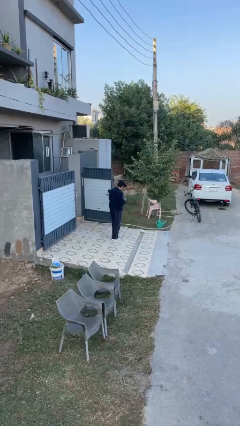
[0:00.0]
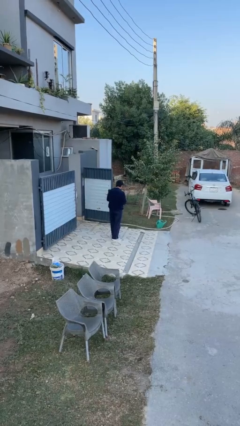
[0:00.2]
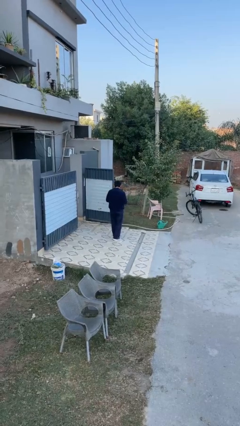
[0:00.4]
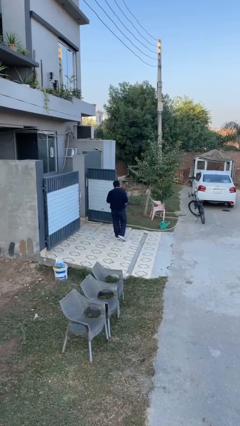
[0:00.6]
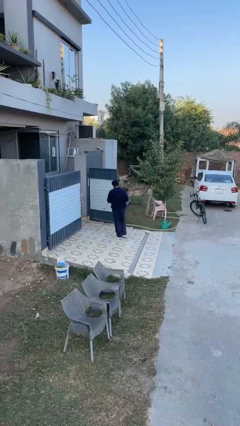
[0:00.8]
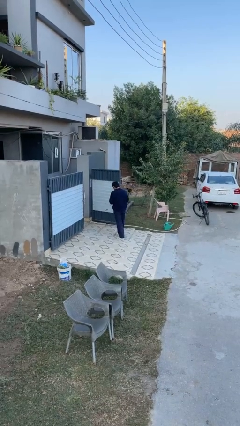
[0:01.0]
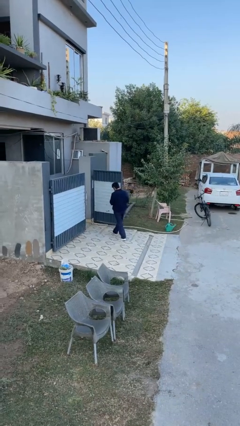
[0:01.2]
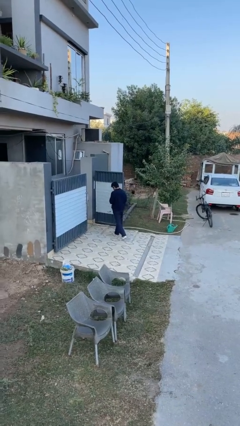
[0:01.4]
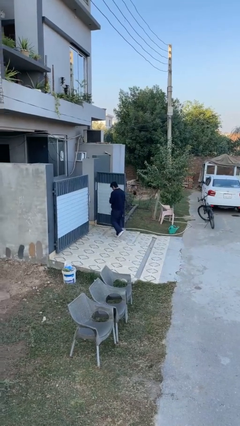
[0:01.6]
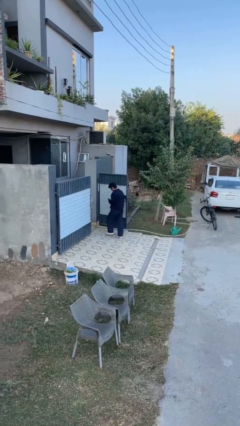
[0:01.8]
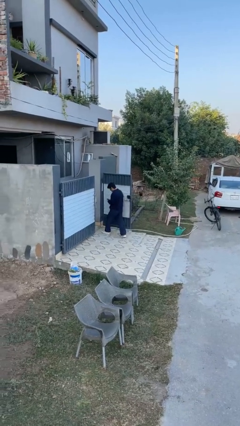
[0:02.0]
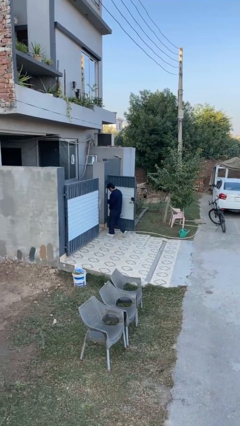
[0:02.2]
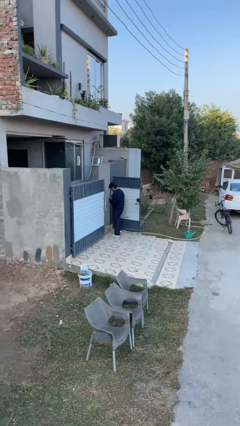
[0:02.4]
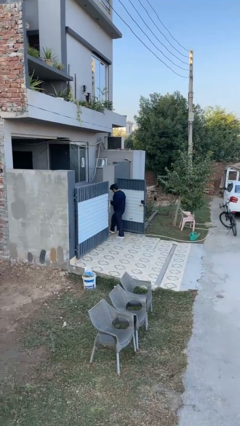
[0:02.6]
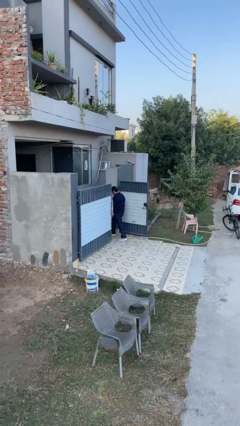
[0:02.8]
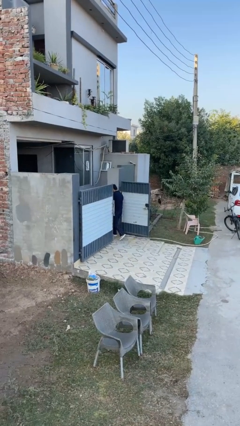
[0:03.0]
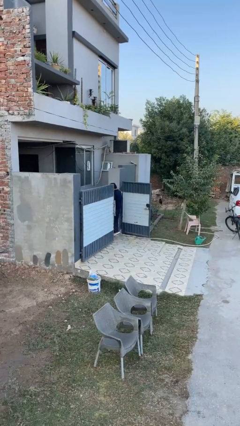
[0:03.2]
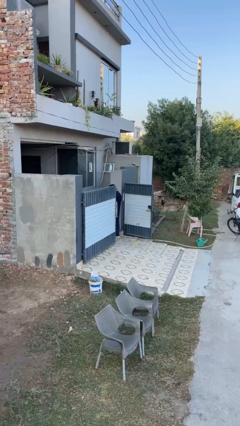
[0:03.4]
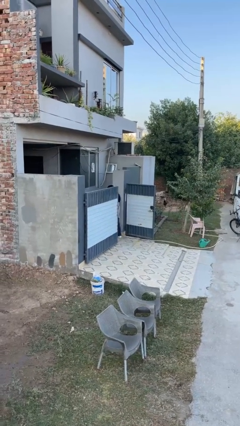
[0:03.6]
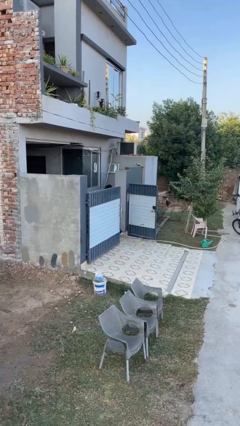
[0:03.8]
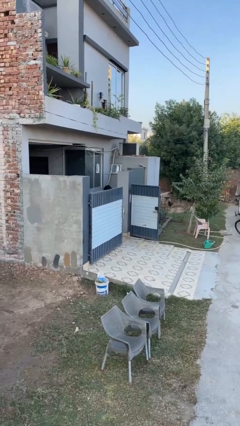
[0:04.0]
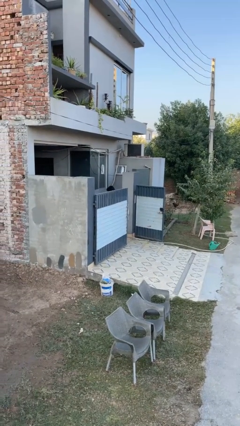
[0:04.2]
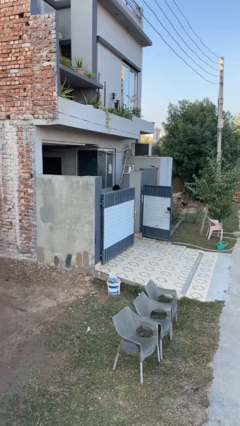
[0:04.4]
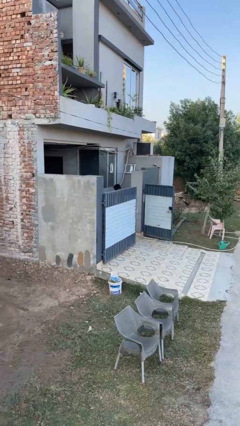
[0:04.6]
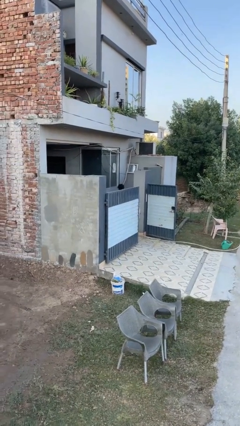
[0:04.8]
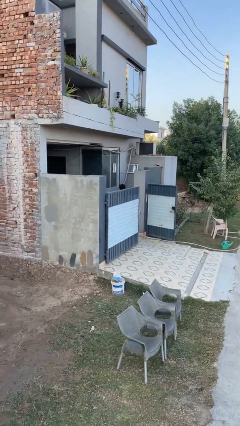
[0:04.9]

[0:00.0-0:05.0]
person exits scene through structure

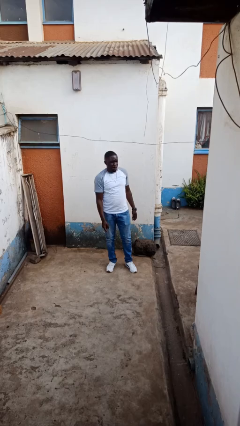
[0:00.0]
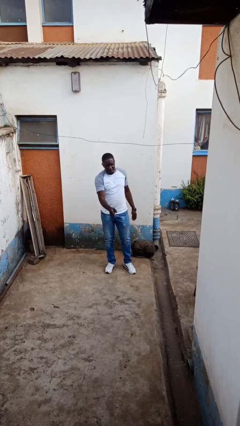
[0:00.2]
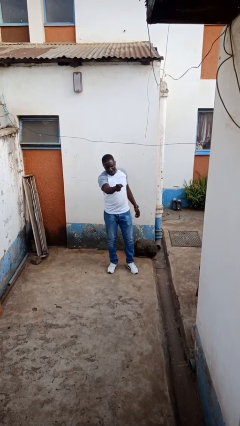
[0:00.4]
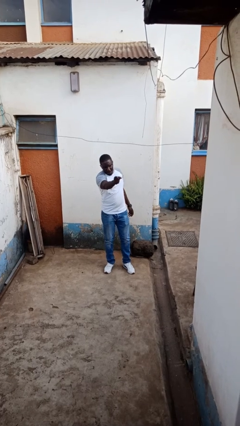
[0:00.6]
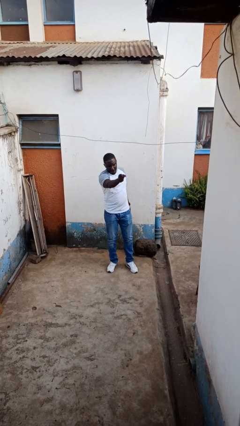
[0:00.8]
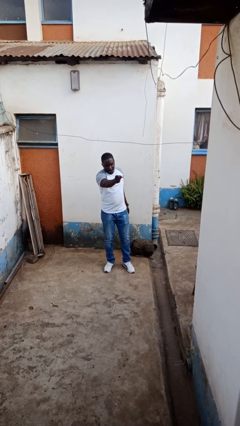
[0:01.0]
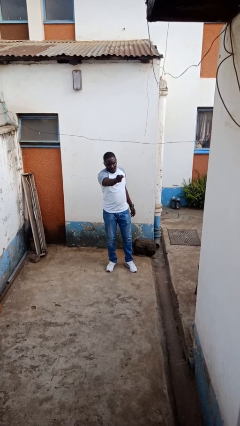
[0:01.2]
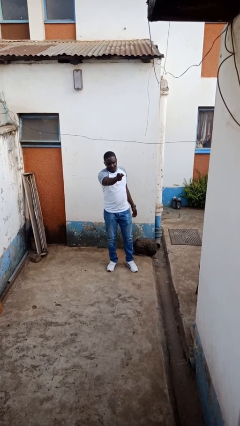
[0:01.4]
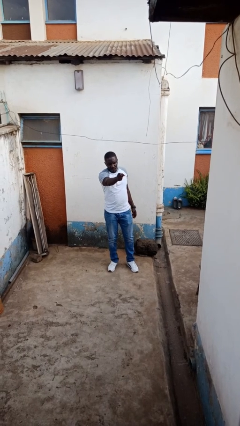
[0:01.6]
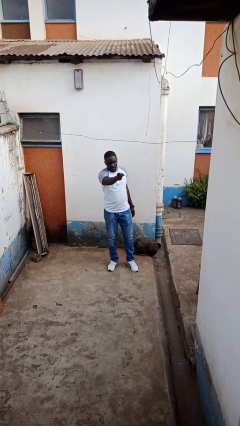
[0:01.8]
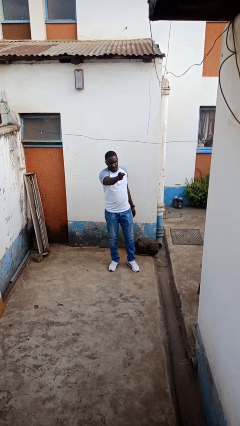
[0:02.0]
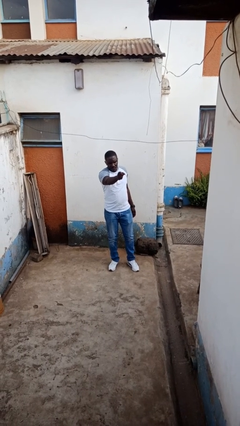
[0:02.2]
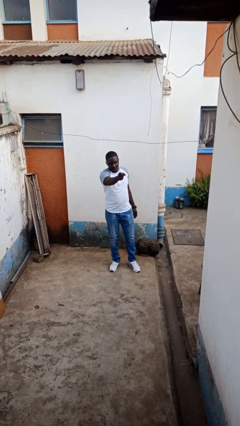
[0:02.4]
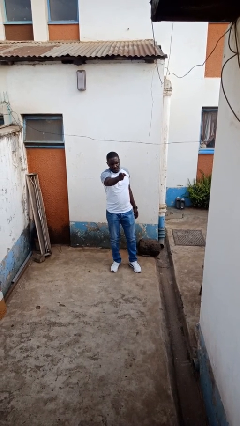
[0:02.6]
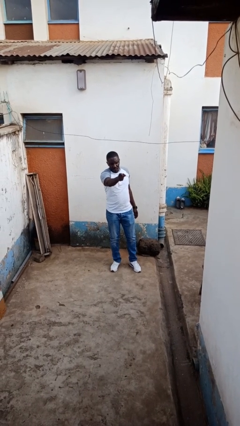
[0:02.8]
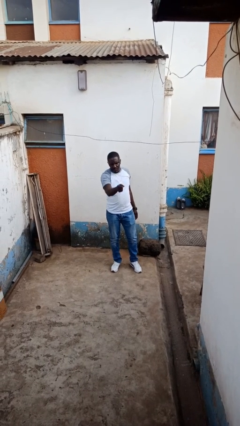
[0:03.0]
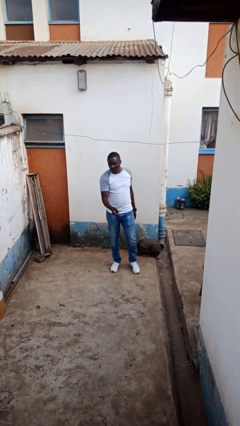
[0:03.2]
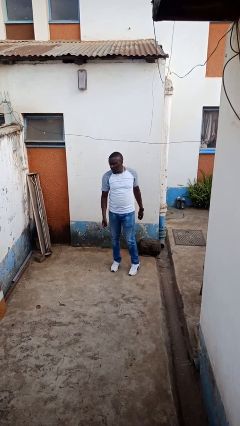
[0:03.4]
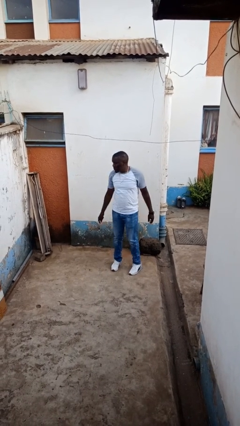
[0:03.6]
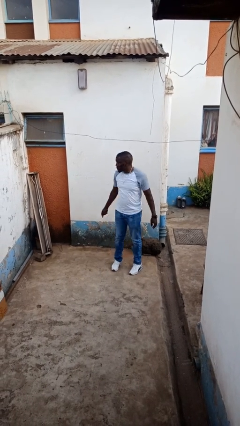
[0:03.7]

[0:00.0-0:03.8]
person points at person

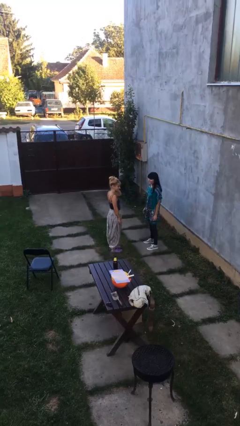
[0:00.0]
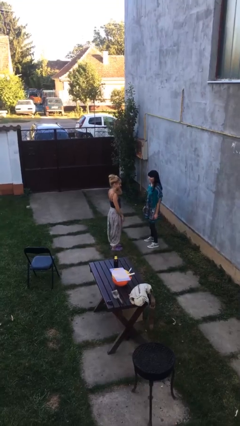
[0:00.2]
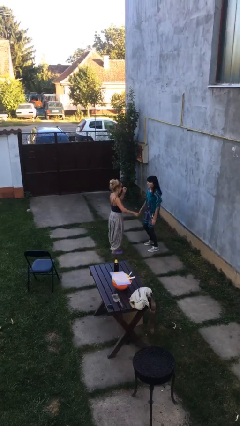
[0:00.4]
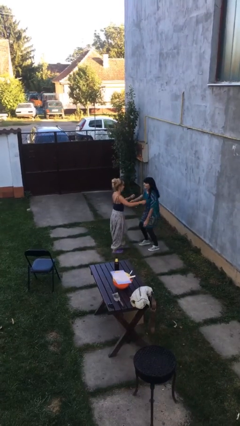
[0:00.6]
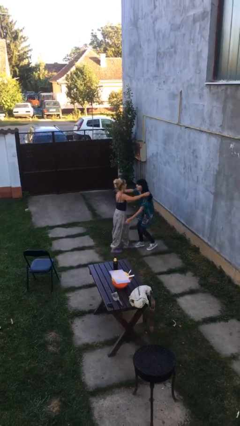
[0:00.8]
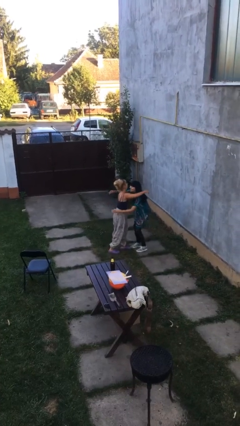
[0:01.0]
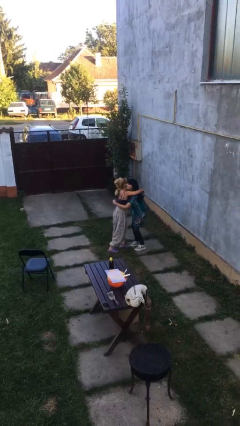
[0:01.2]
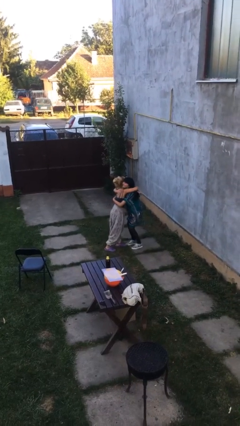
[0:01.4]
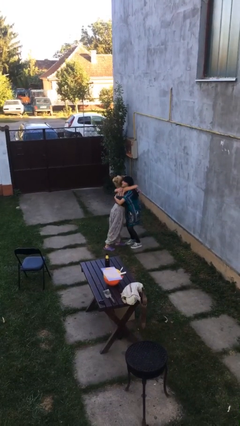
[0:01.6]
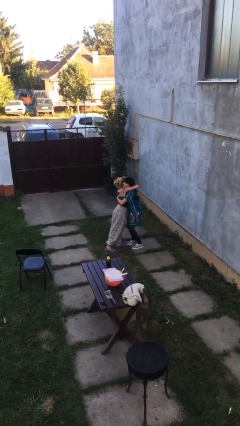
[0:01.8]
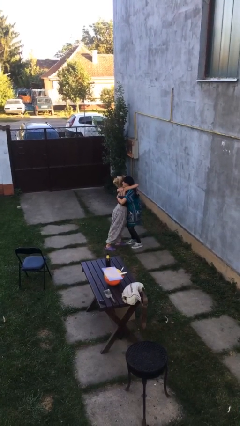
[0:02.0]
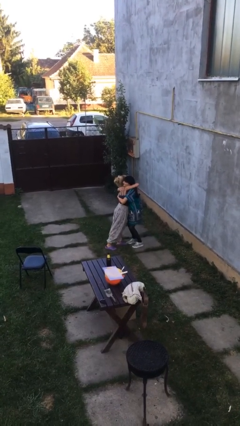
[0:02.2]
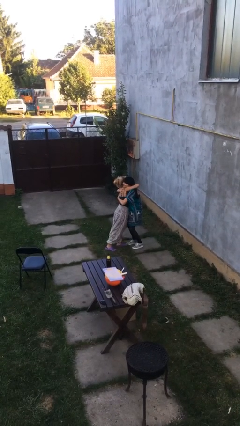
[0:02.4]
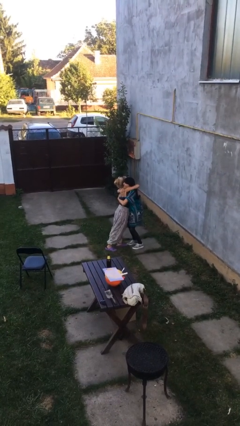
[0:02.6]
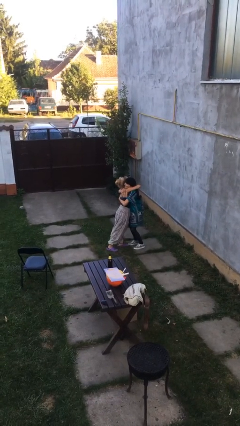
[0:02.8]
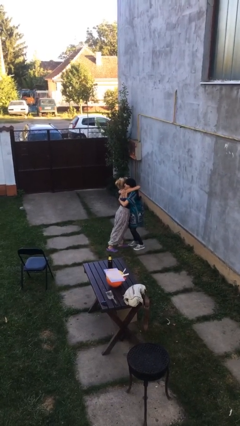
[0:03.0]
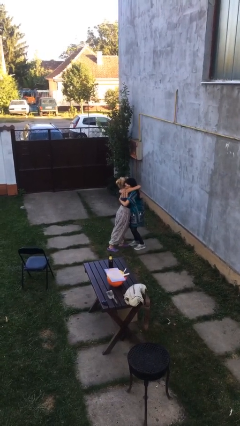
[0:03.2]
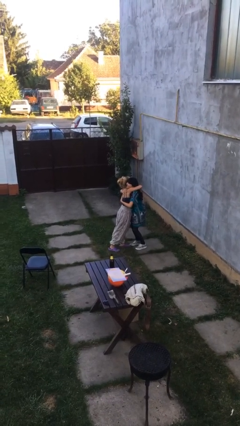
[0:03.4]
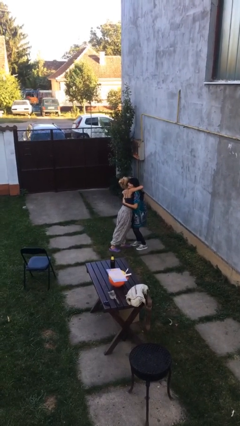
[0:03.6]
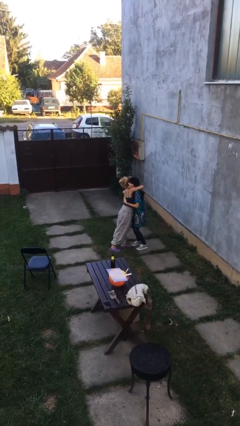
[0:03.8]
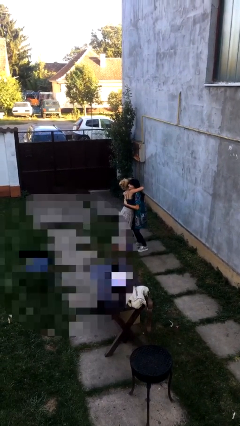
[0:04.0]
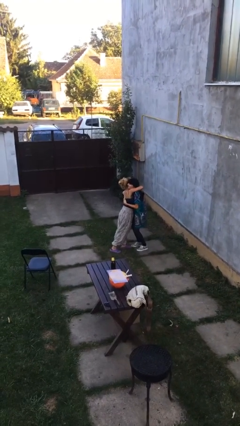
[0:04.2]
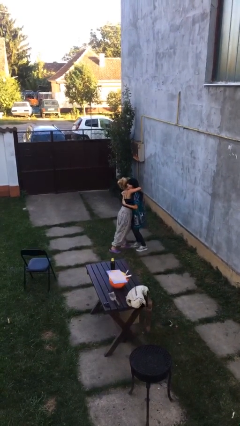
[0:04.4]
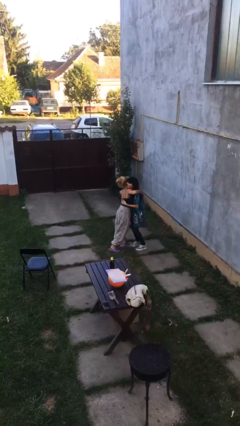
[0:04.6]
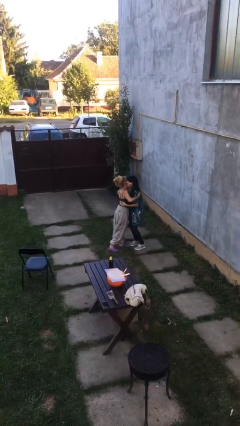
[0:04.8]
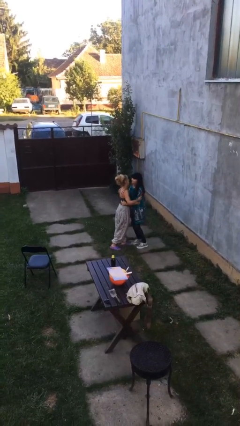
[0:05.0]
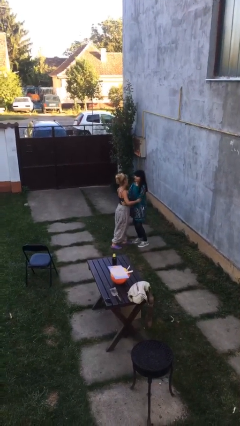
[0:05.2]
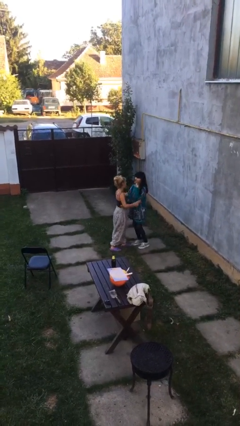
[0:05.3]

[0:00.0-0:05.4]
person embraces person

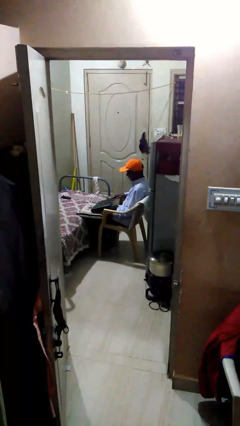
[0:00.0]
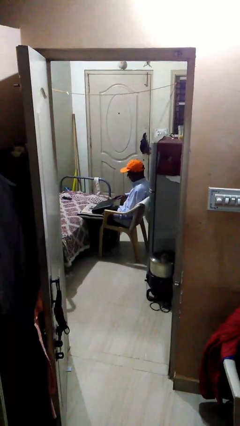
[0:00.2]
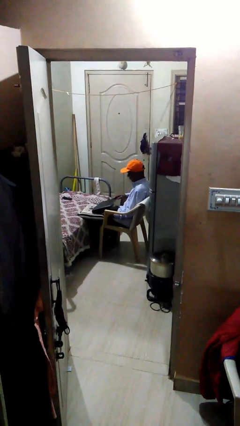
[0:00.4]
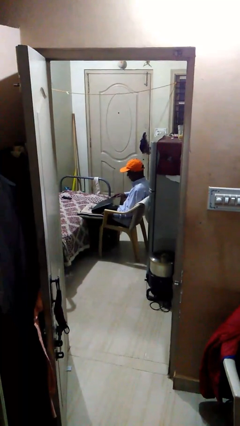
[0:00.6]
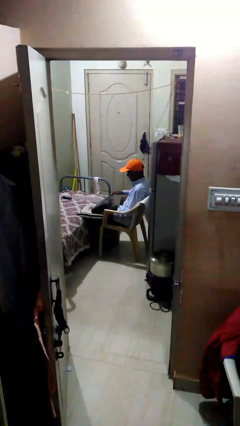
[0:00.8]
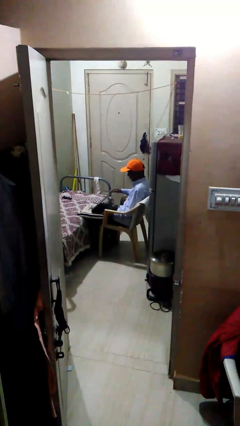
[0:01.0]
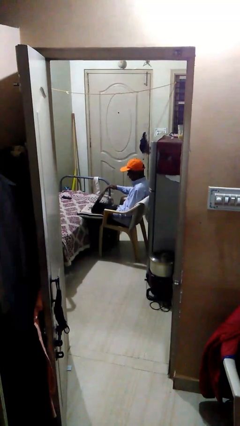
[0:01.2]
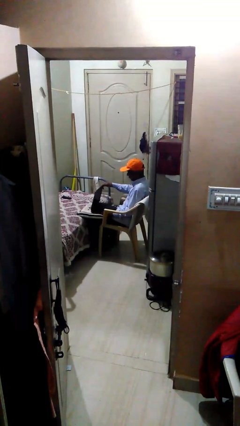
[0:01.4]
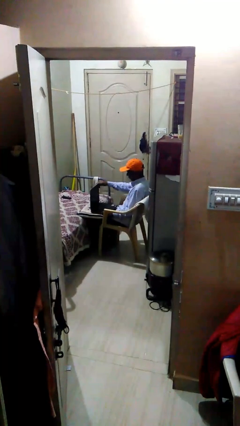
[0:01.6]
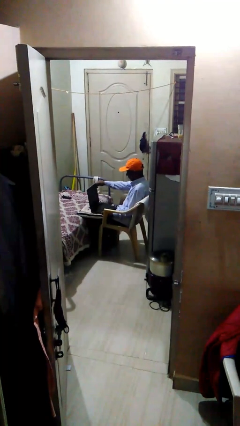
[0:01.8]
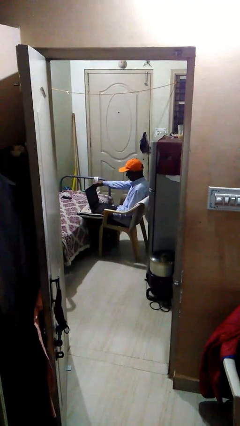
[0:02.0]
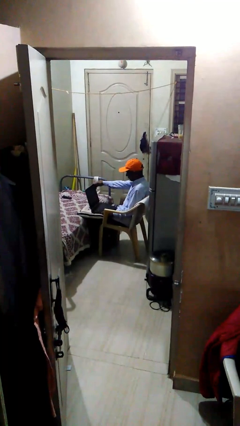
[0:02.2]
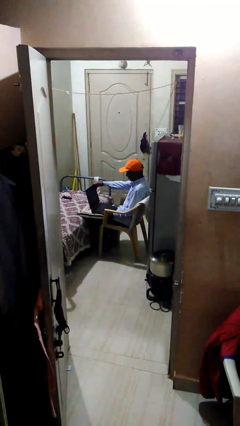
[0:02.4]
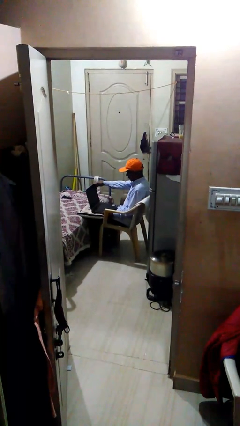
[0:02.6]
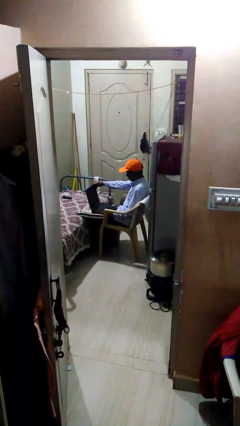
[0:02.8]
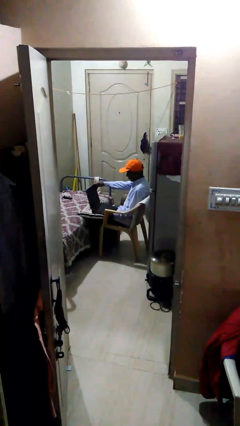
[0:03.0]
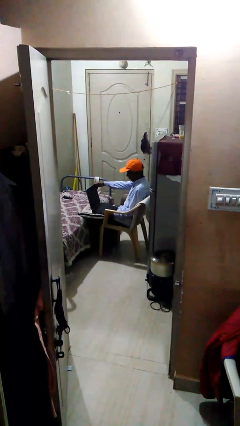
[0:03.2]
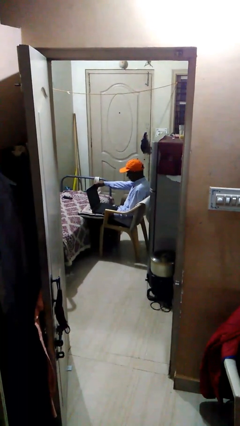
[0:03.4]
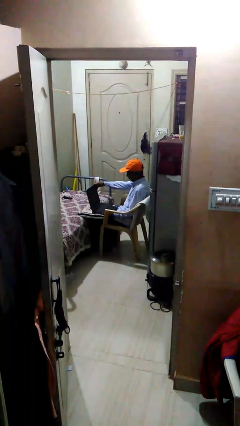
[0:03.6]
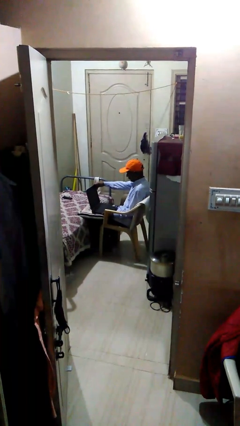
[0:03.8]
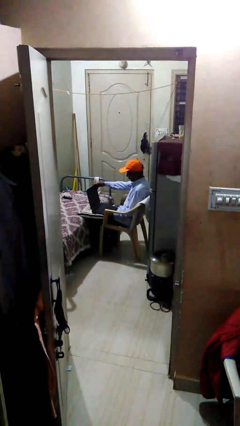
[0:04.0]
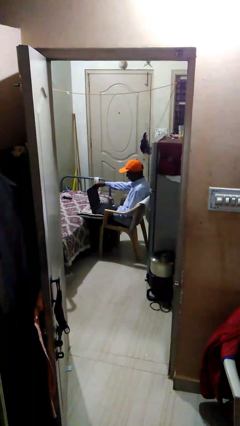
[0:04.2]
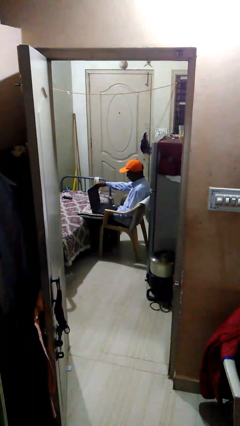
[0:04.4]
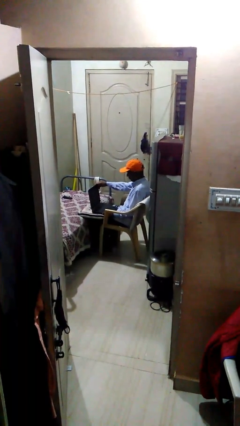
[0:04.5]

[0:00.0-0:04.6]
person interacts with laptop
